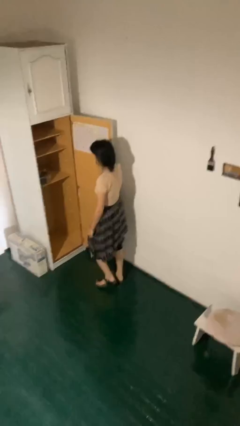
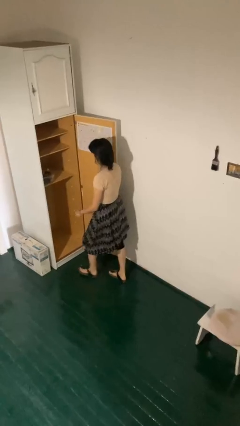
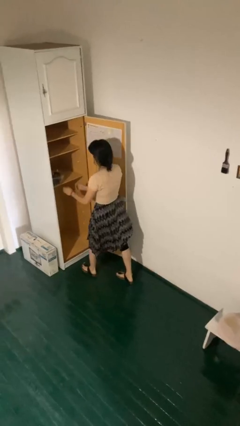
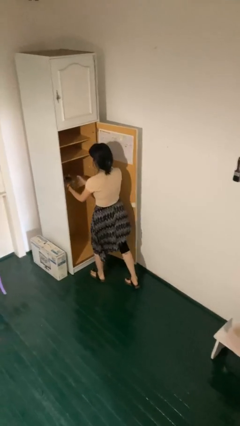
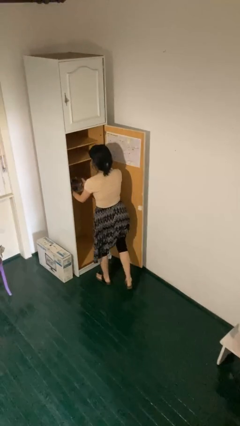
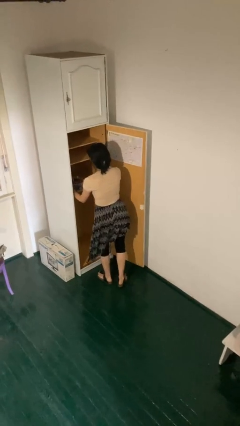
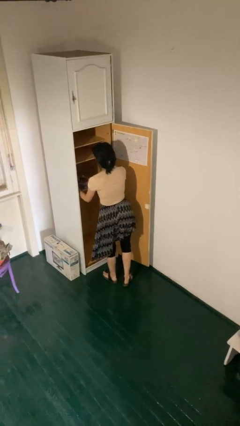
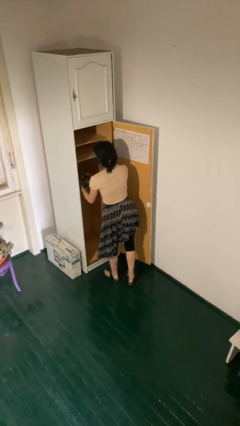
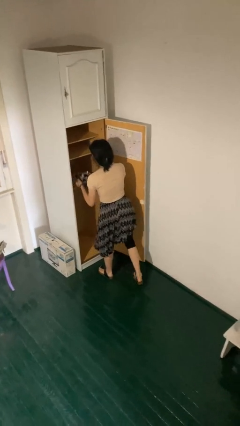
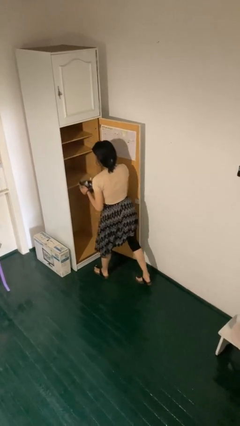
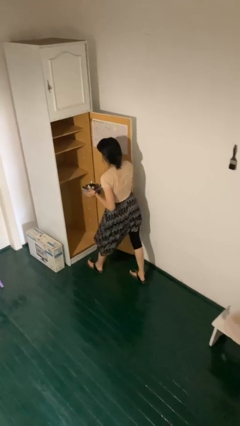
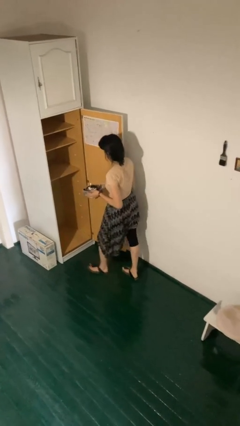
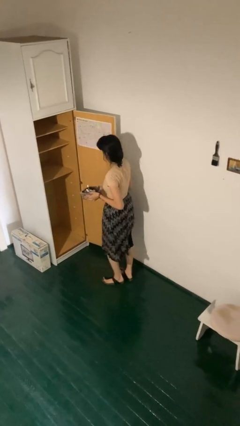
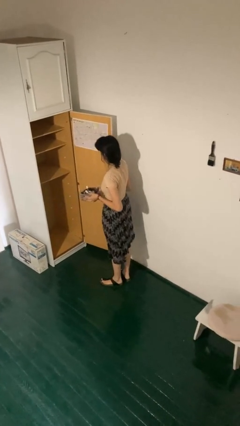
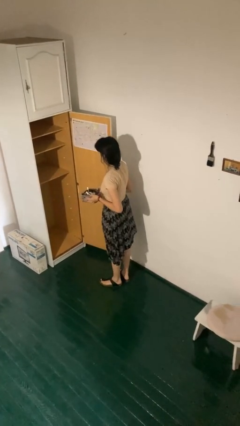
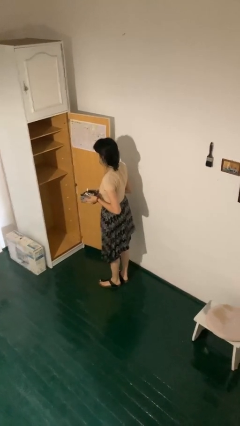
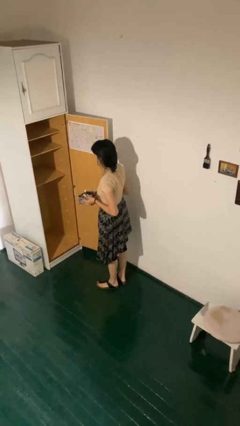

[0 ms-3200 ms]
person picks up object from cabinet

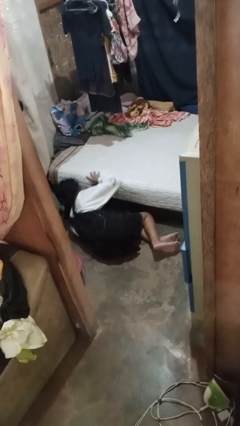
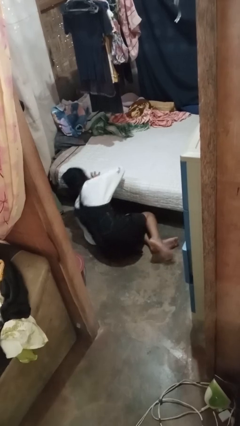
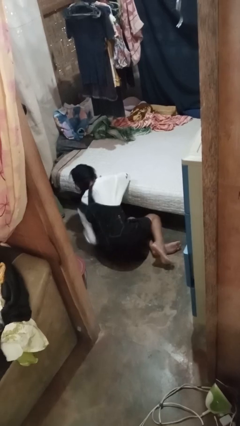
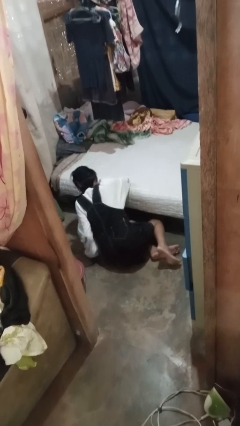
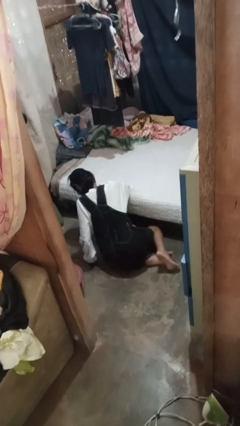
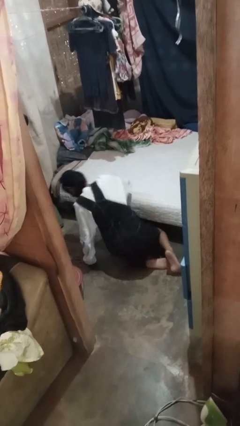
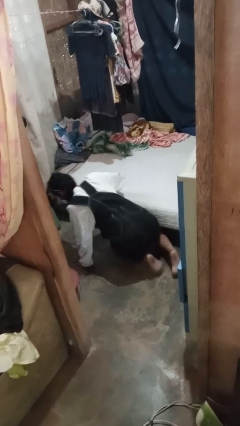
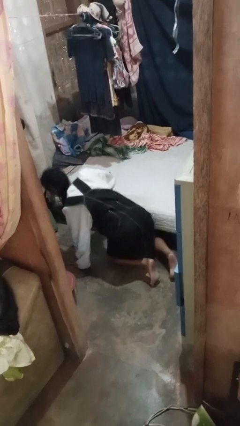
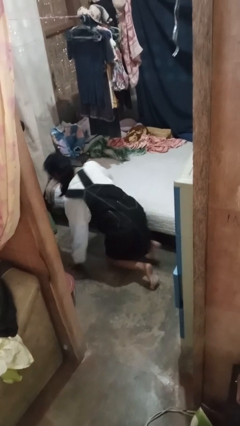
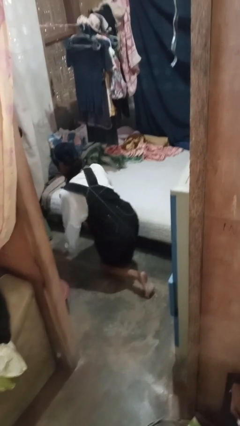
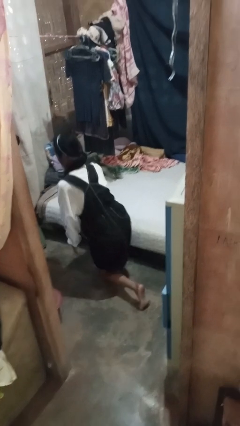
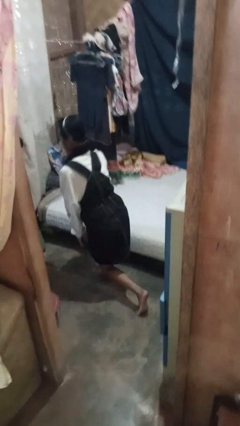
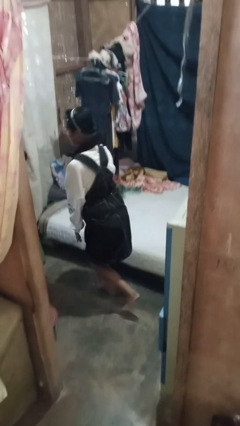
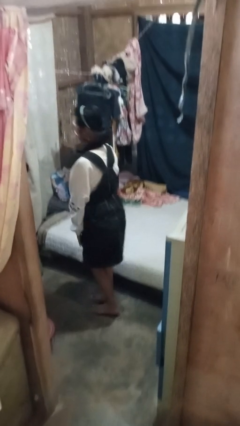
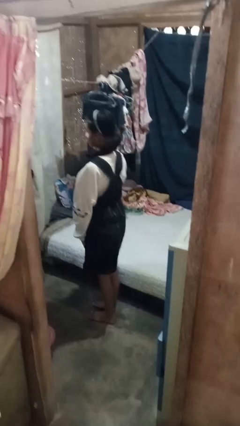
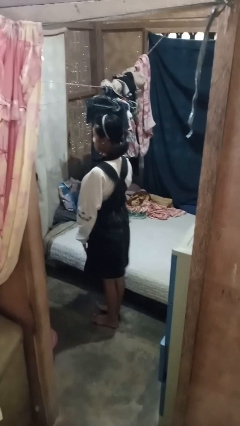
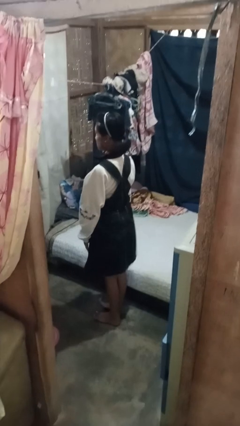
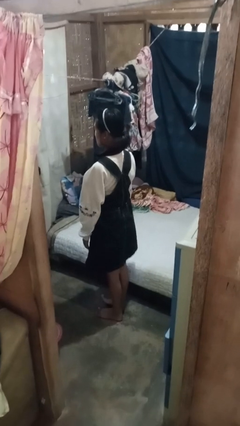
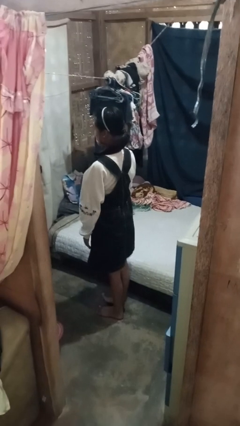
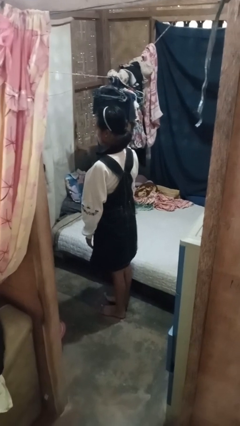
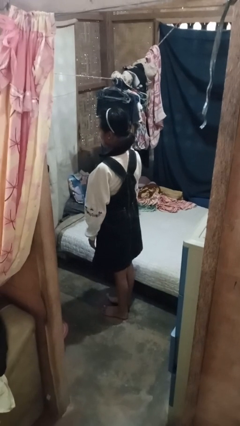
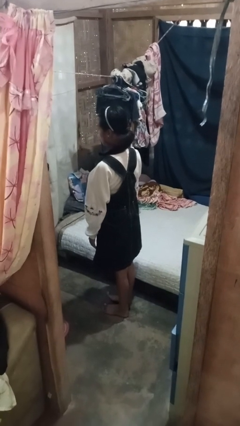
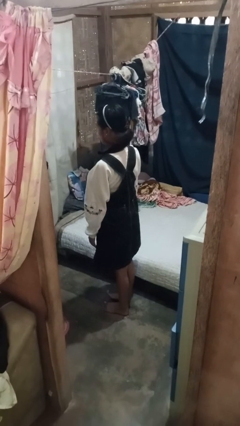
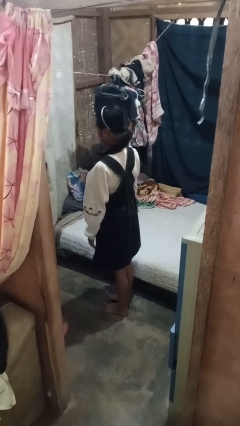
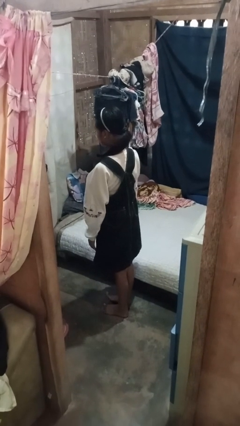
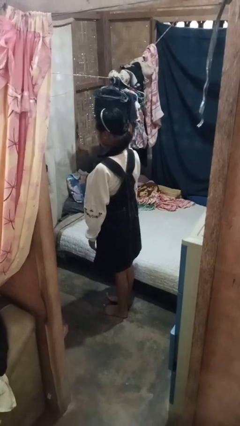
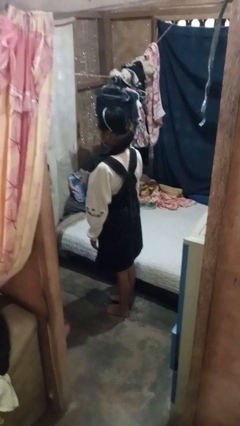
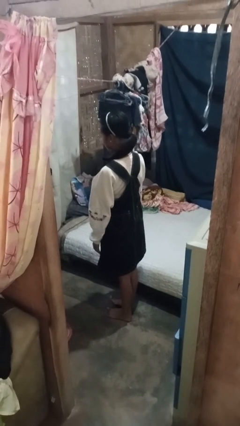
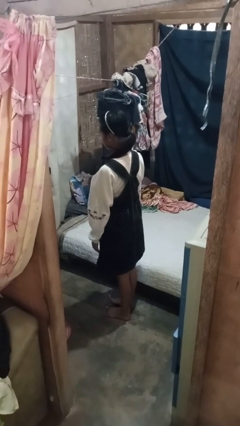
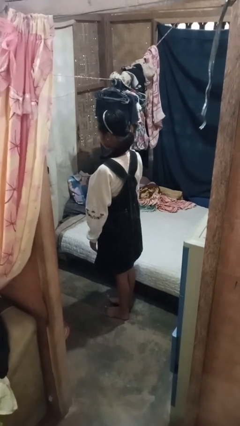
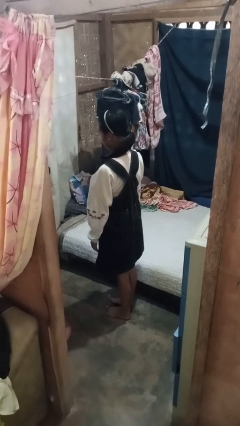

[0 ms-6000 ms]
person stands up from floor

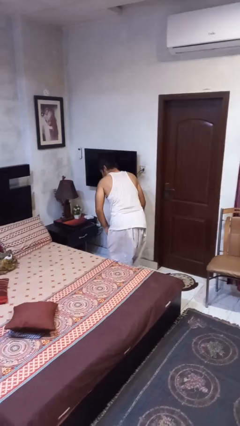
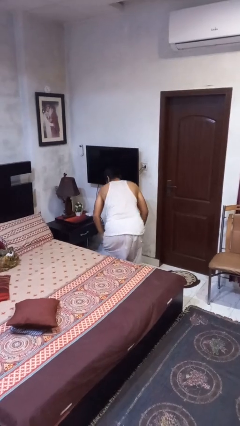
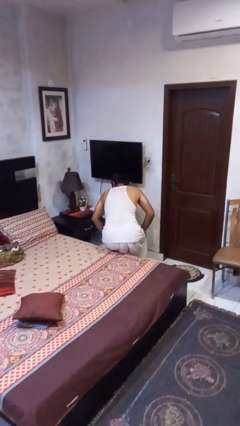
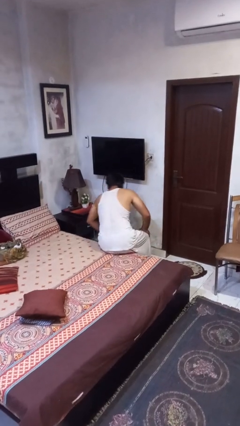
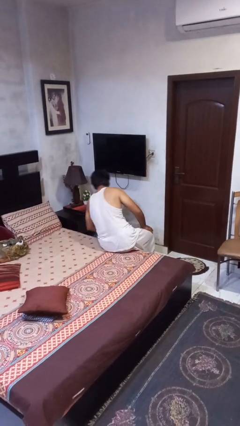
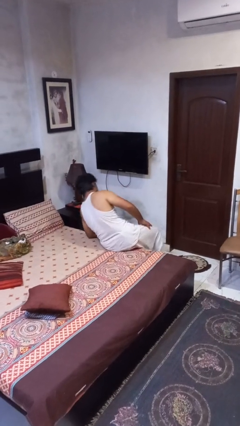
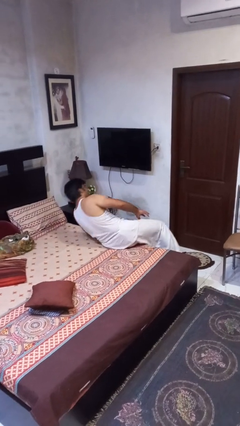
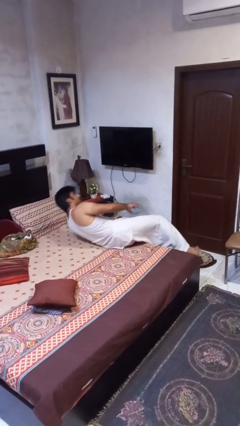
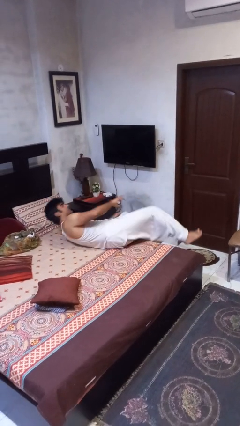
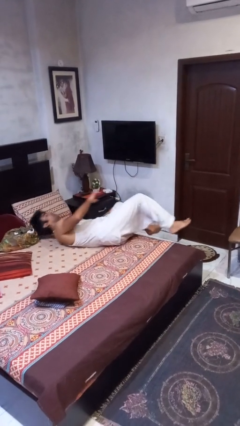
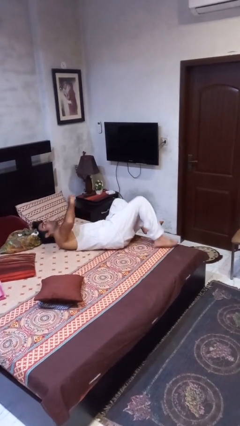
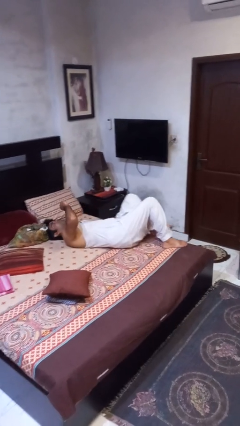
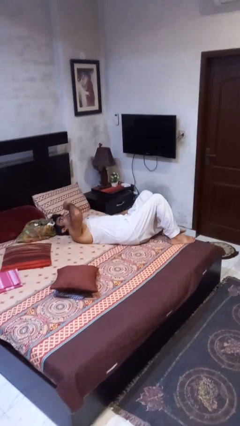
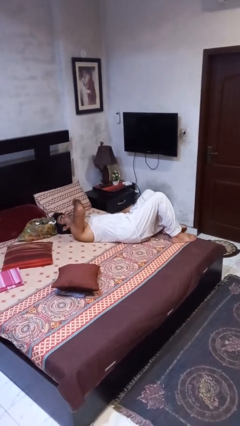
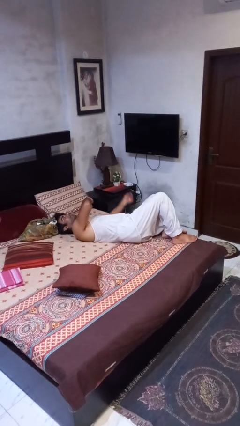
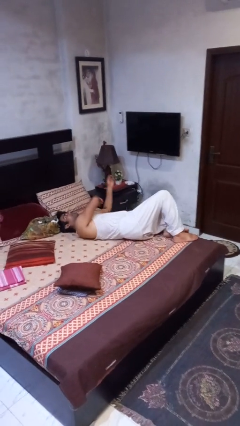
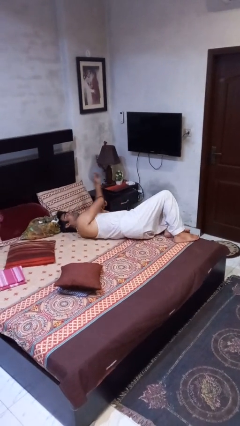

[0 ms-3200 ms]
person lies down on bed

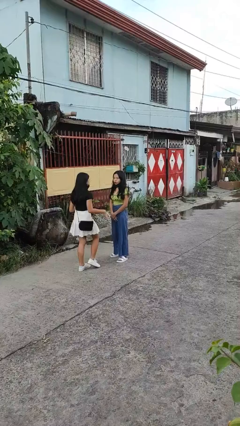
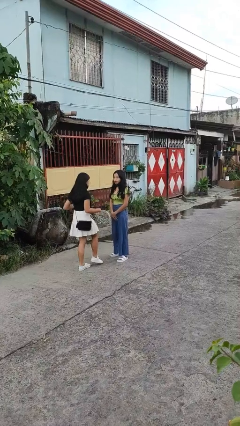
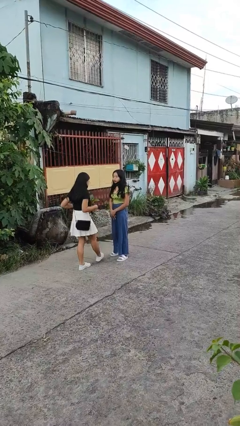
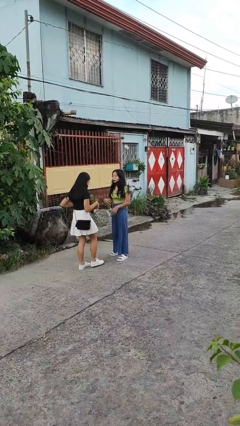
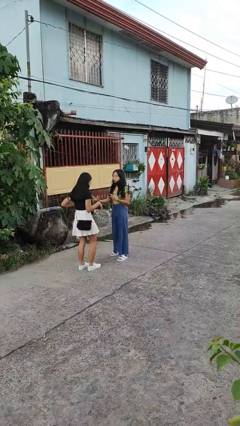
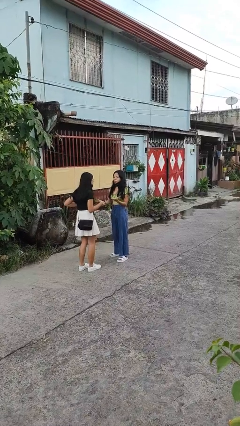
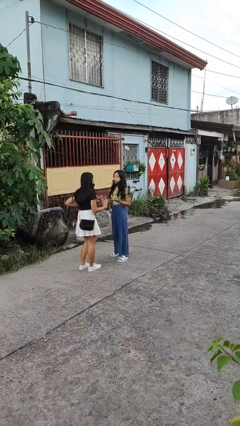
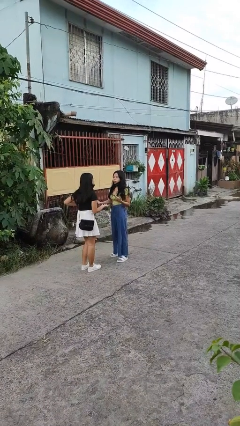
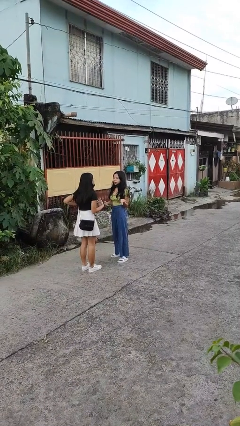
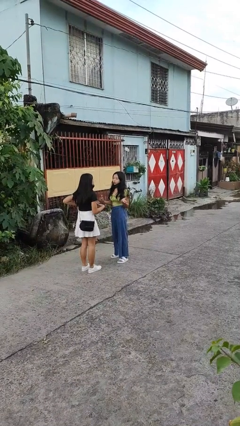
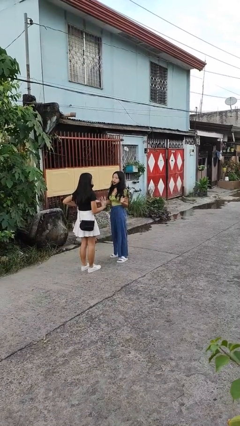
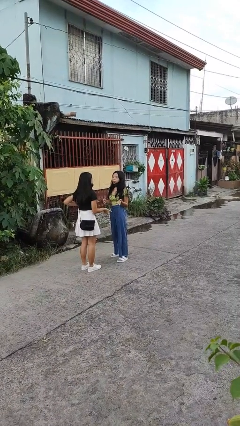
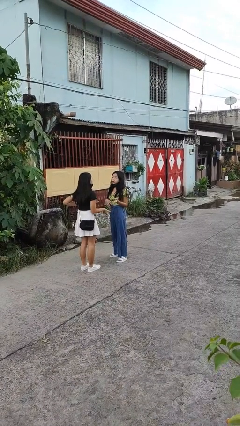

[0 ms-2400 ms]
person talks to person

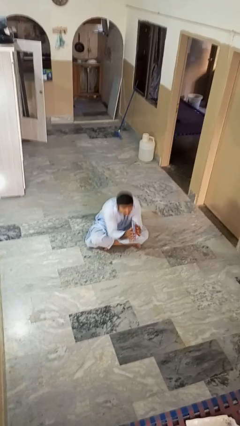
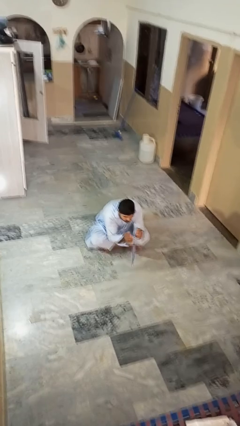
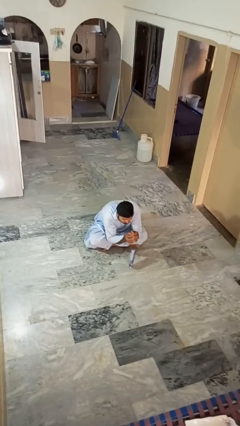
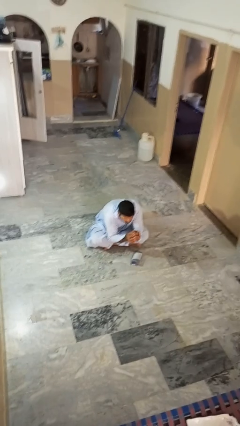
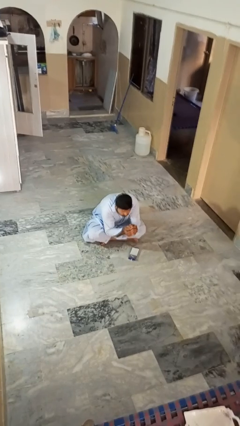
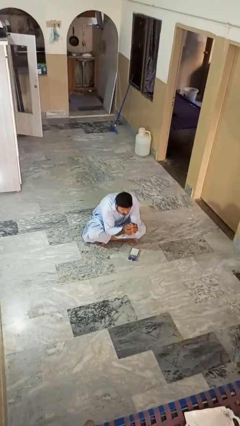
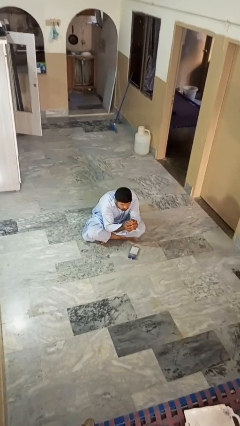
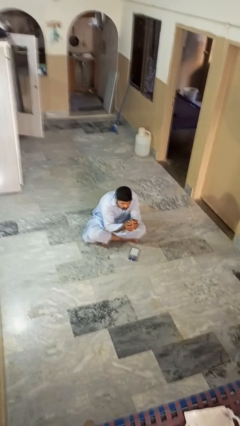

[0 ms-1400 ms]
person catches dropped object

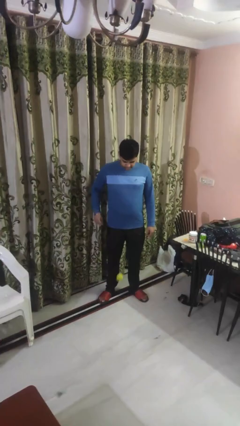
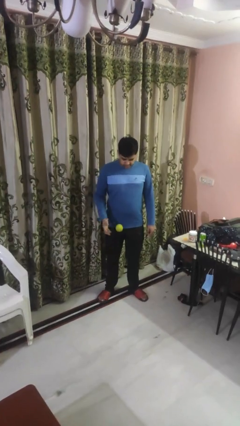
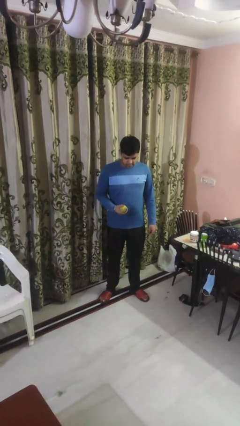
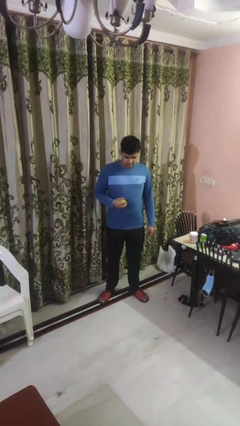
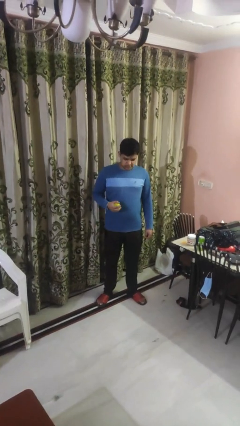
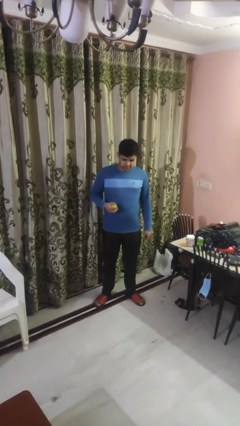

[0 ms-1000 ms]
person bounces ball on floor

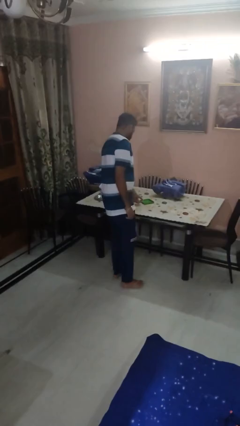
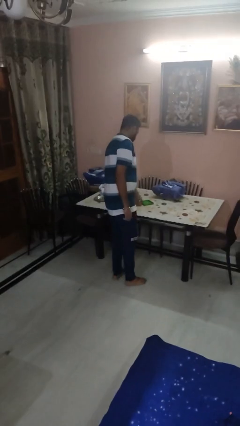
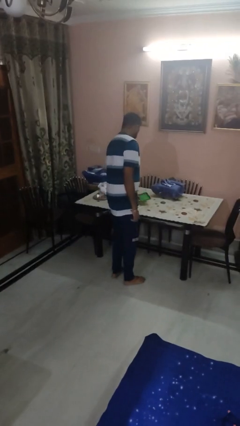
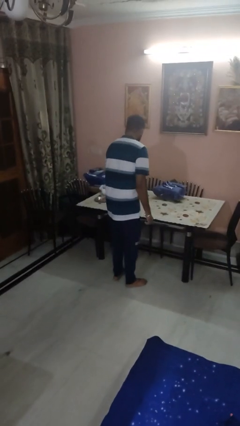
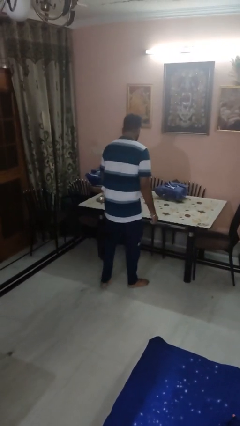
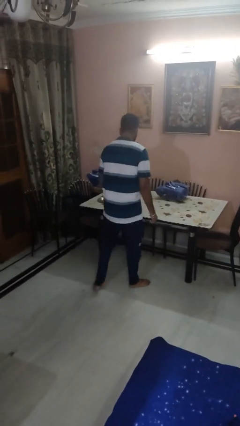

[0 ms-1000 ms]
person picks up object from table
